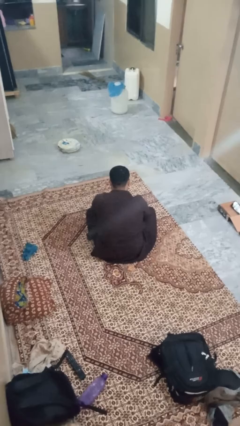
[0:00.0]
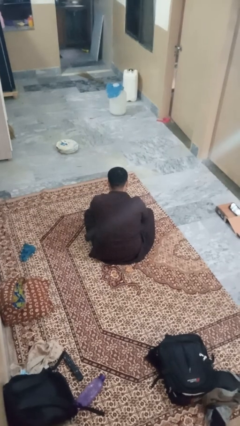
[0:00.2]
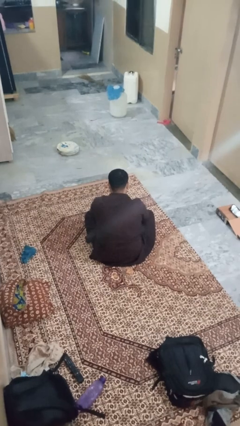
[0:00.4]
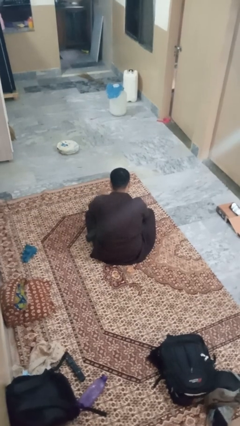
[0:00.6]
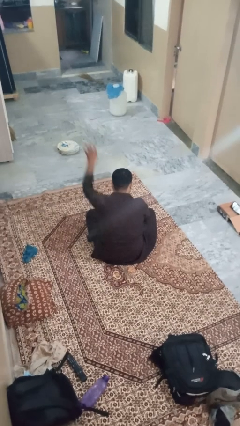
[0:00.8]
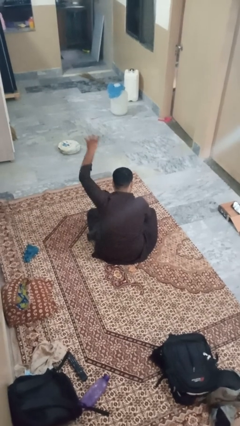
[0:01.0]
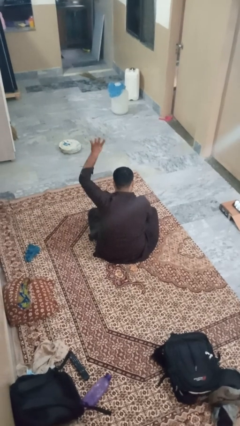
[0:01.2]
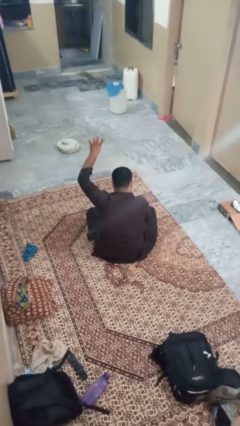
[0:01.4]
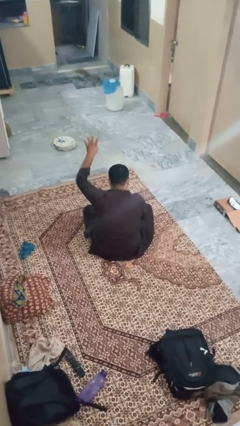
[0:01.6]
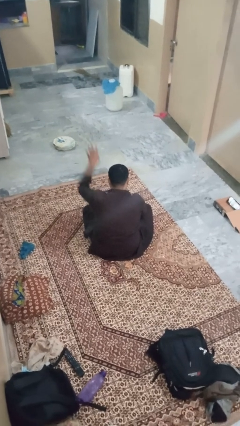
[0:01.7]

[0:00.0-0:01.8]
person gestures number four

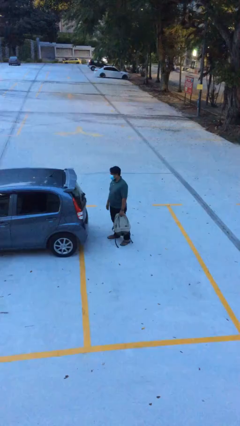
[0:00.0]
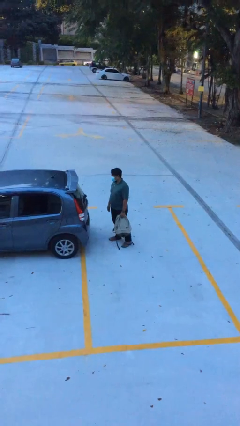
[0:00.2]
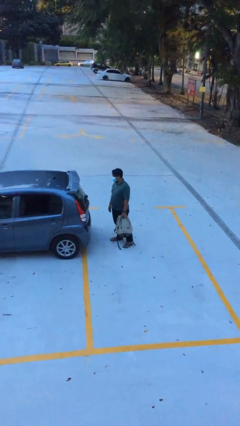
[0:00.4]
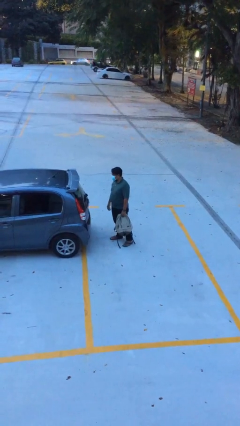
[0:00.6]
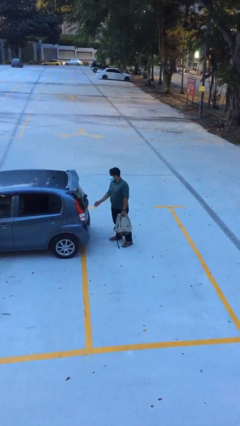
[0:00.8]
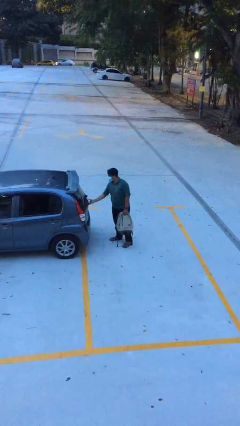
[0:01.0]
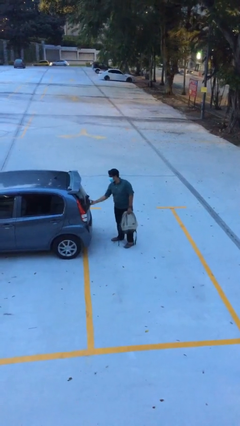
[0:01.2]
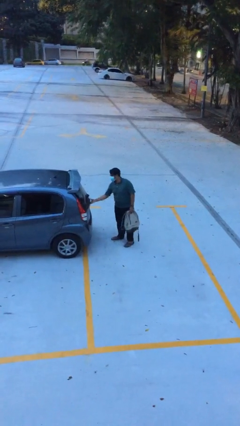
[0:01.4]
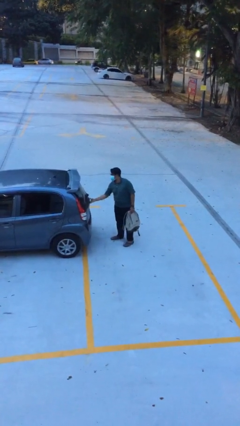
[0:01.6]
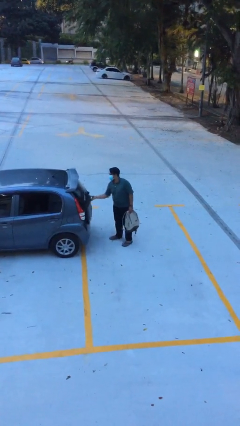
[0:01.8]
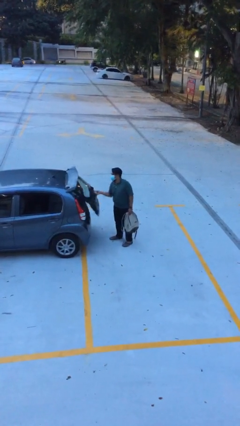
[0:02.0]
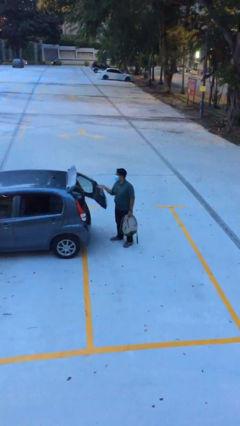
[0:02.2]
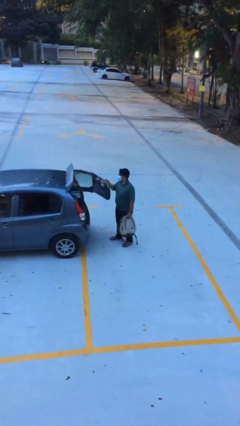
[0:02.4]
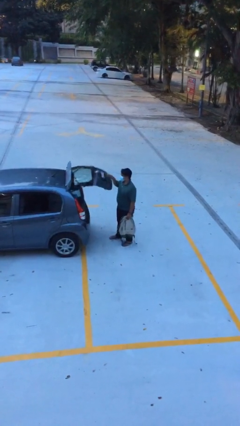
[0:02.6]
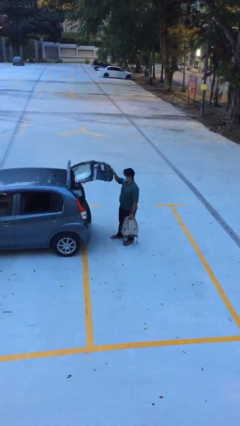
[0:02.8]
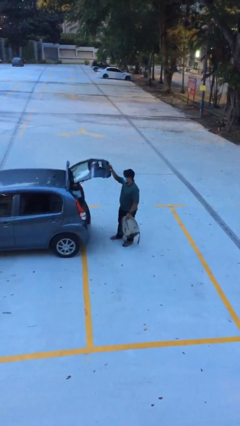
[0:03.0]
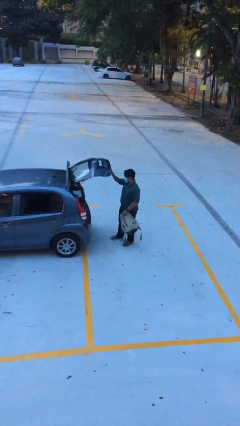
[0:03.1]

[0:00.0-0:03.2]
person opens car trunk

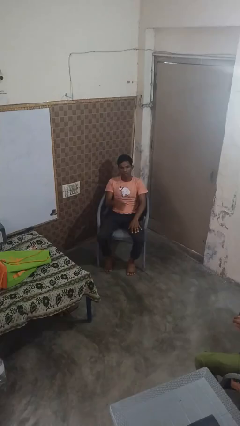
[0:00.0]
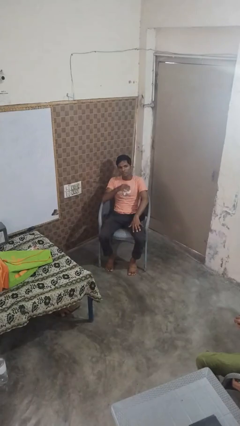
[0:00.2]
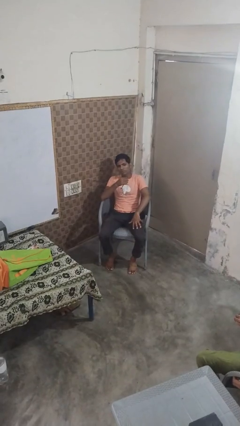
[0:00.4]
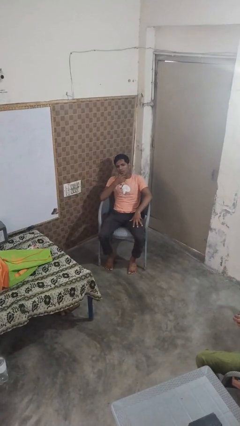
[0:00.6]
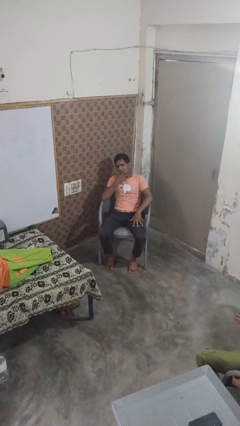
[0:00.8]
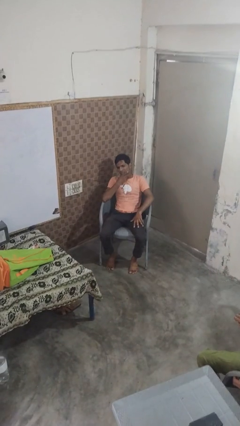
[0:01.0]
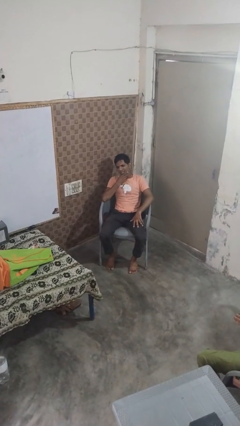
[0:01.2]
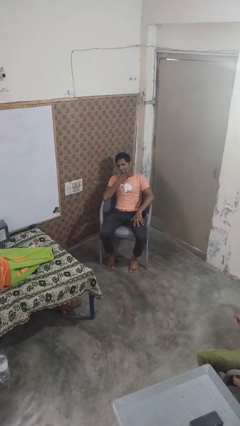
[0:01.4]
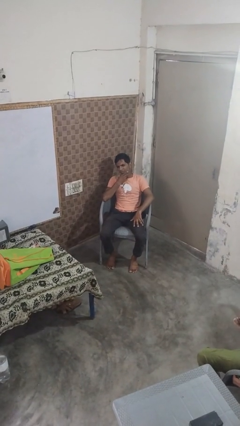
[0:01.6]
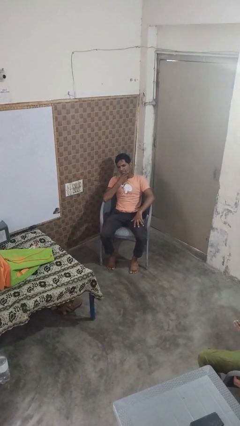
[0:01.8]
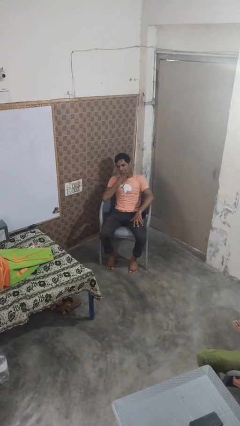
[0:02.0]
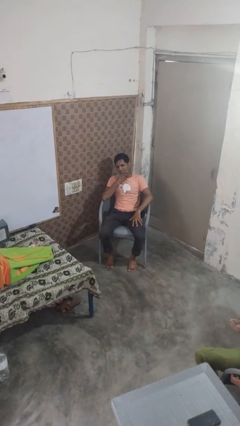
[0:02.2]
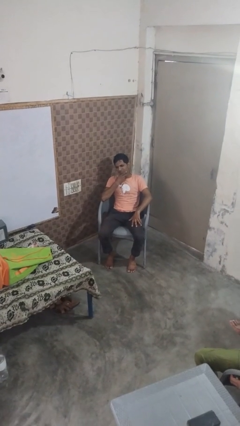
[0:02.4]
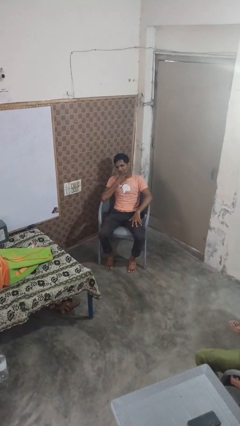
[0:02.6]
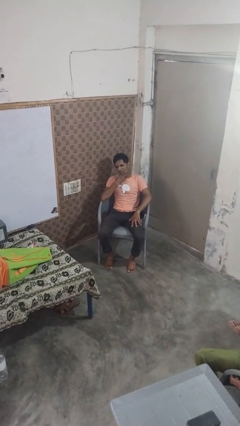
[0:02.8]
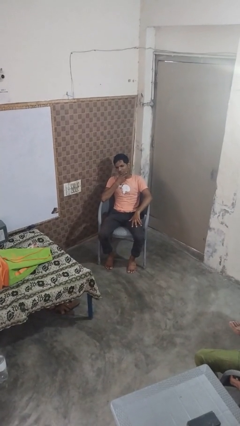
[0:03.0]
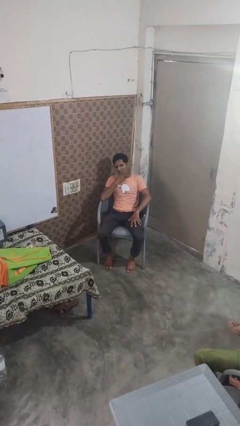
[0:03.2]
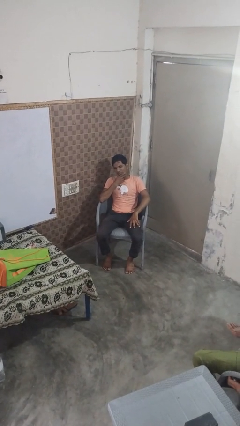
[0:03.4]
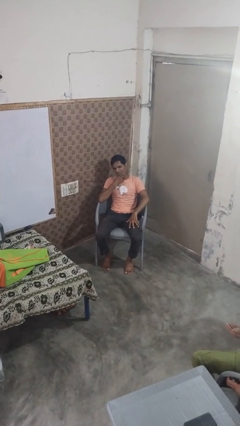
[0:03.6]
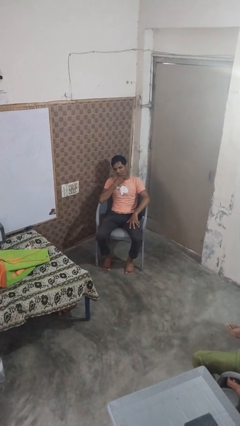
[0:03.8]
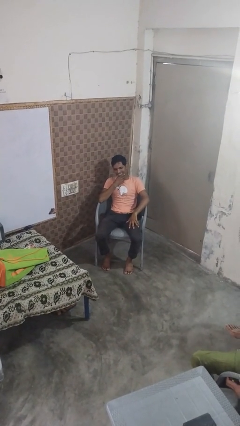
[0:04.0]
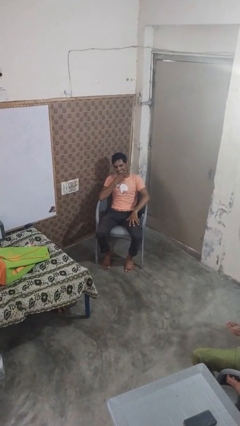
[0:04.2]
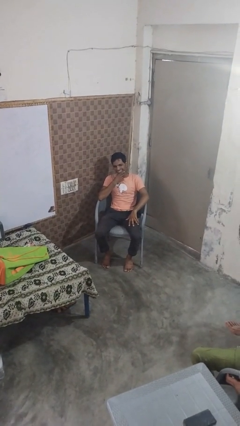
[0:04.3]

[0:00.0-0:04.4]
person strokes chin

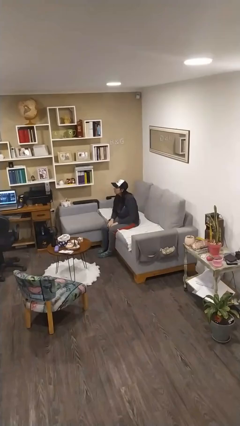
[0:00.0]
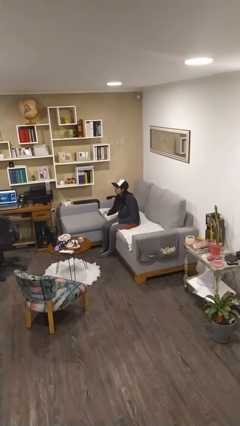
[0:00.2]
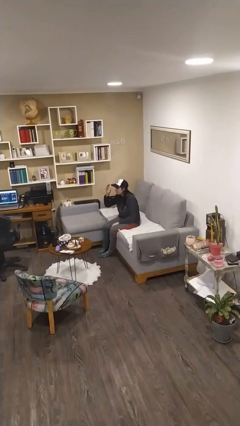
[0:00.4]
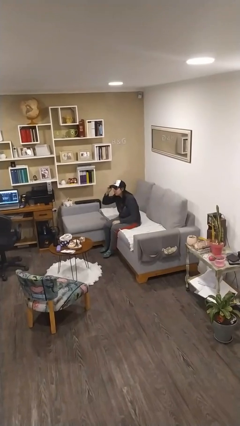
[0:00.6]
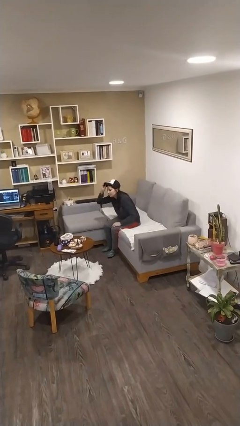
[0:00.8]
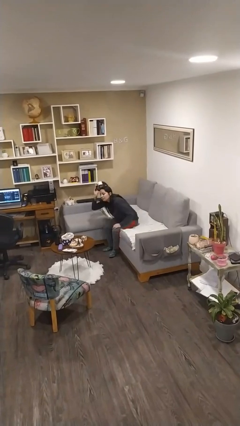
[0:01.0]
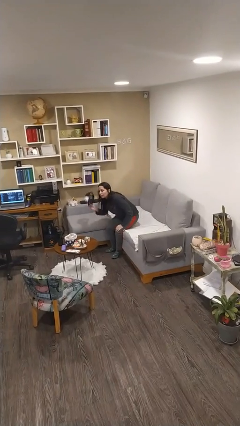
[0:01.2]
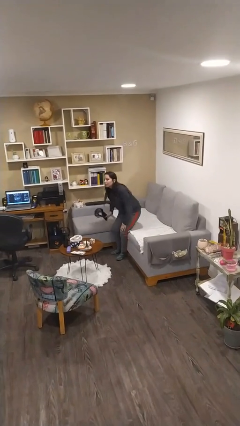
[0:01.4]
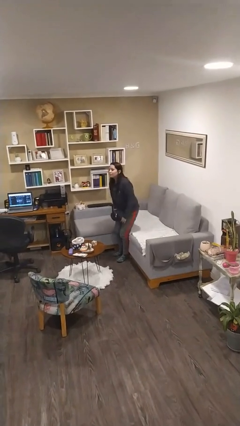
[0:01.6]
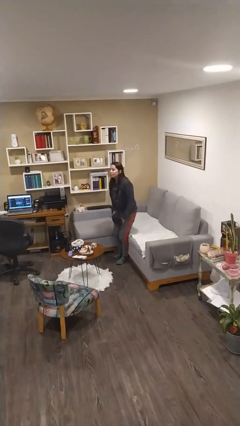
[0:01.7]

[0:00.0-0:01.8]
person takes off hat

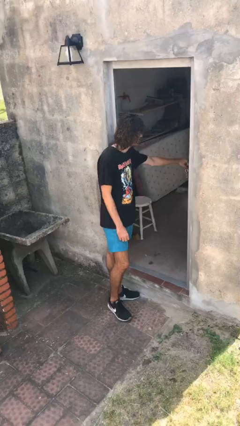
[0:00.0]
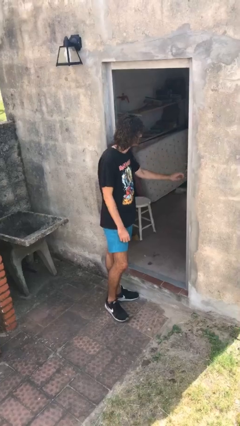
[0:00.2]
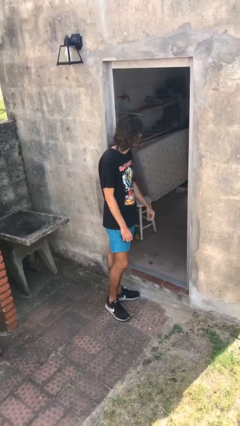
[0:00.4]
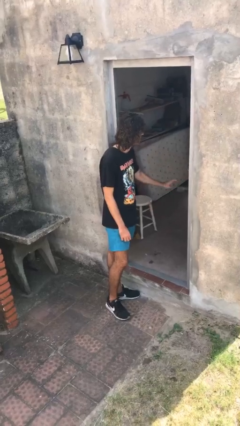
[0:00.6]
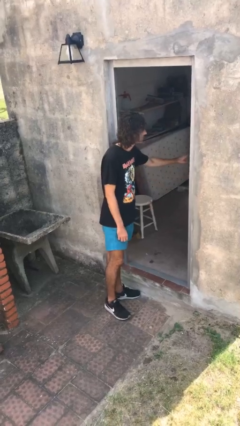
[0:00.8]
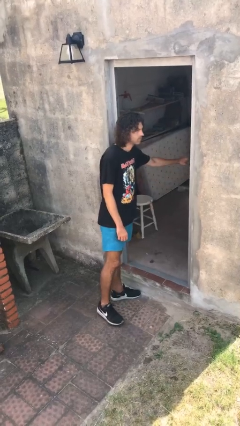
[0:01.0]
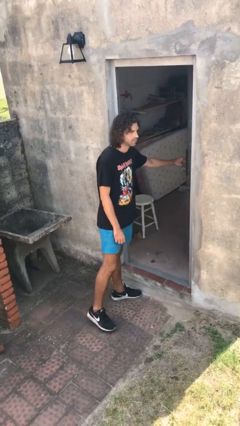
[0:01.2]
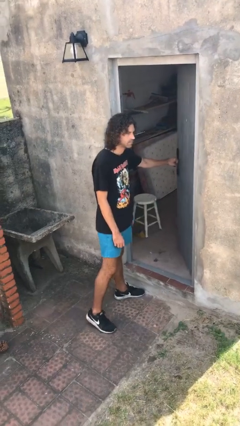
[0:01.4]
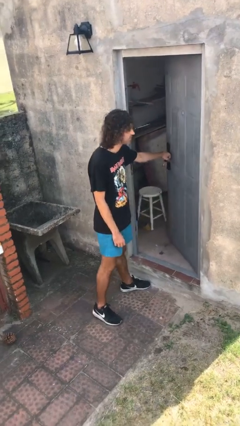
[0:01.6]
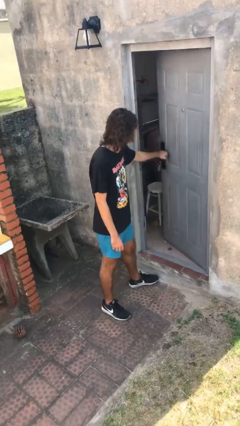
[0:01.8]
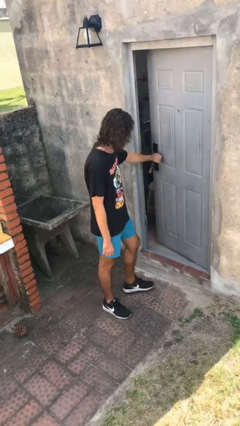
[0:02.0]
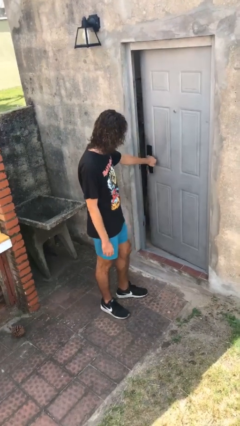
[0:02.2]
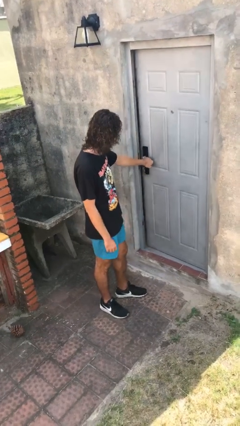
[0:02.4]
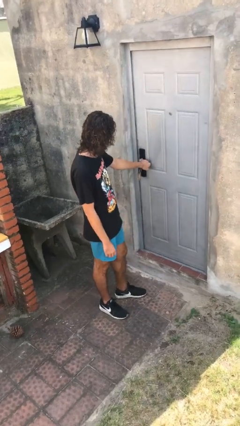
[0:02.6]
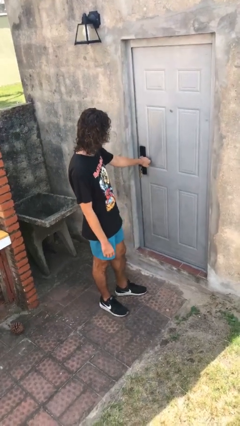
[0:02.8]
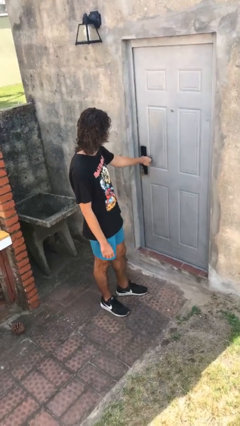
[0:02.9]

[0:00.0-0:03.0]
person closes facility door

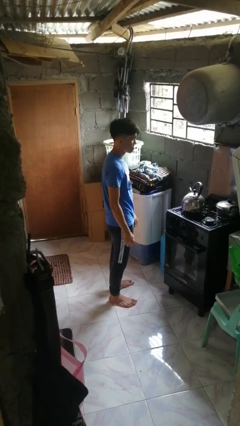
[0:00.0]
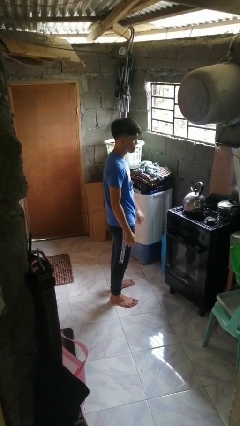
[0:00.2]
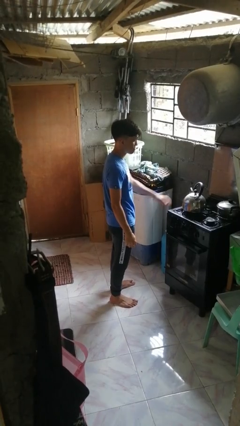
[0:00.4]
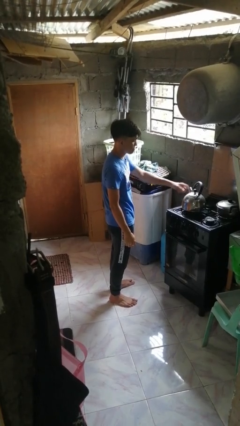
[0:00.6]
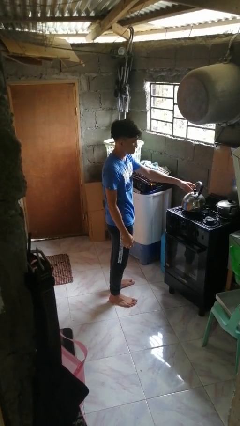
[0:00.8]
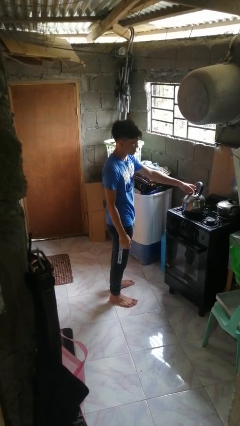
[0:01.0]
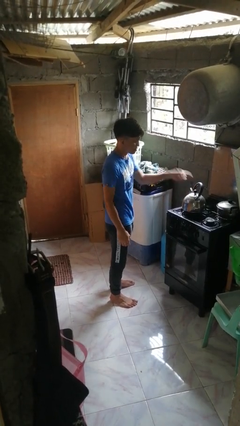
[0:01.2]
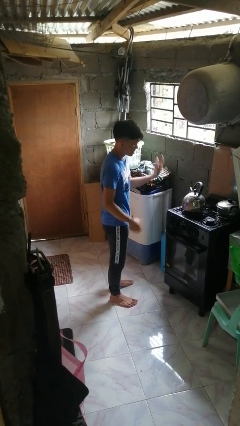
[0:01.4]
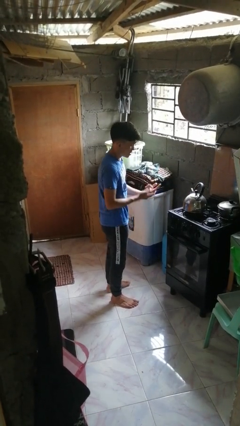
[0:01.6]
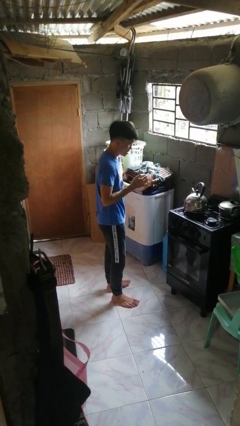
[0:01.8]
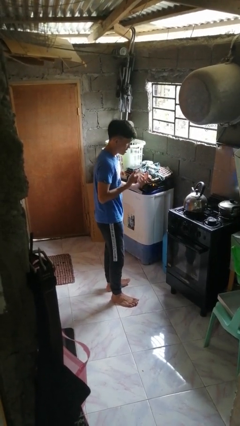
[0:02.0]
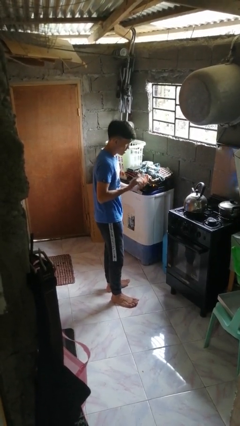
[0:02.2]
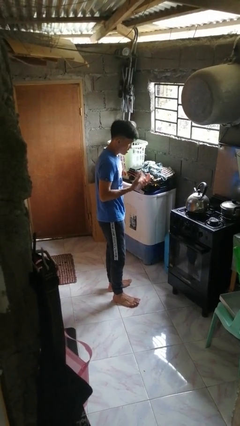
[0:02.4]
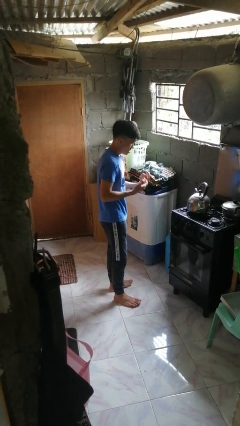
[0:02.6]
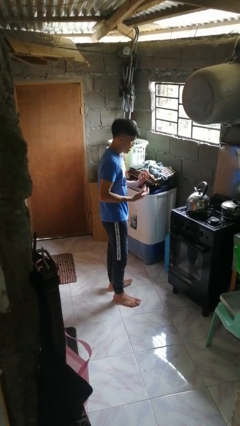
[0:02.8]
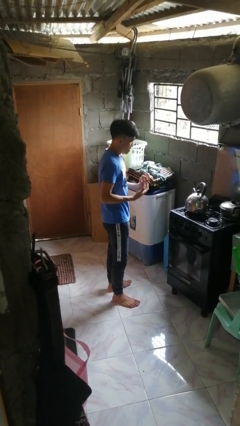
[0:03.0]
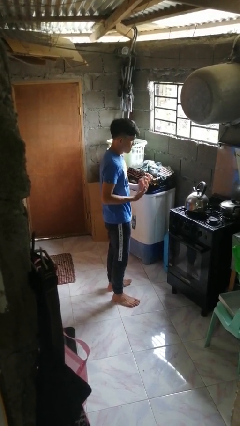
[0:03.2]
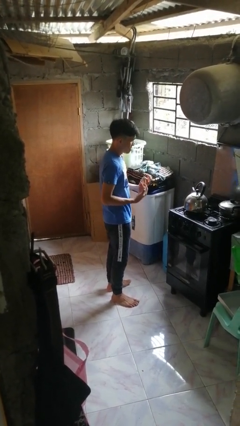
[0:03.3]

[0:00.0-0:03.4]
person burns hand
